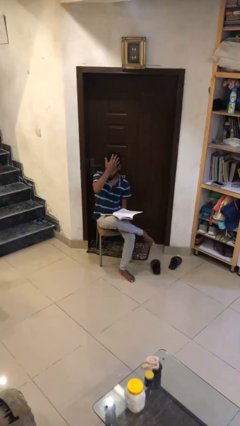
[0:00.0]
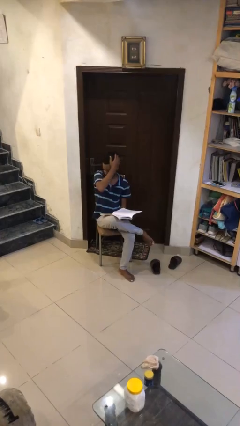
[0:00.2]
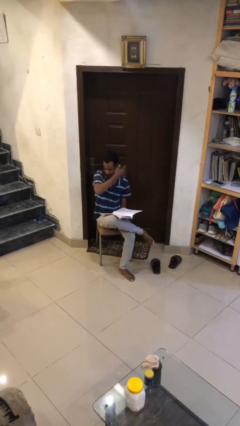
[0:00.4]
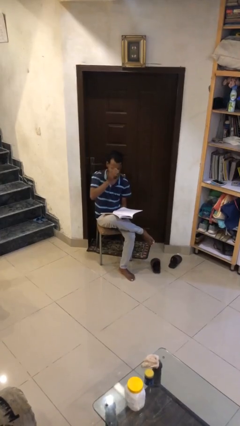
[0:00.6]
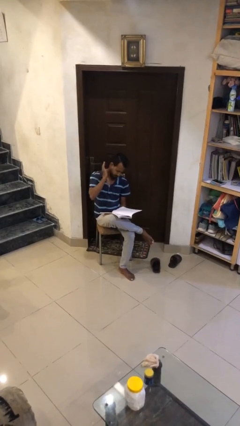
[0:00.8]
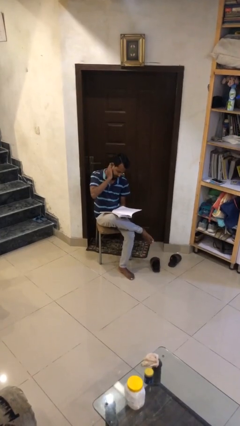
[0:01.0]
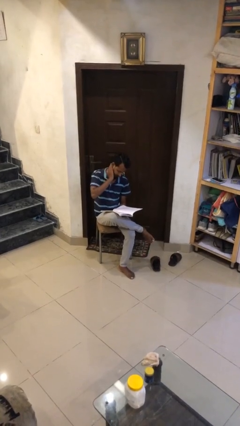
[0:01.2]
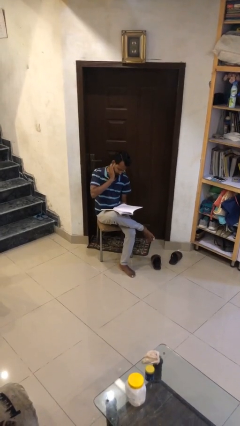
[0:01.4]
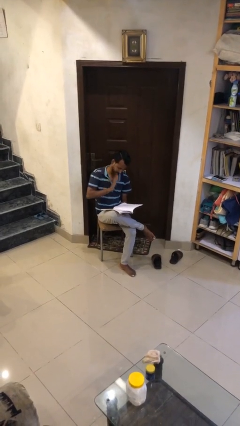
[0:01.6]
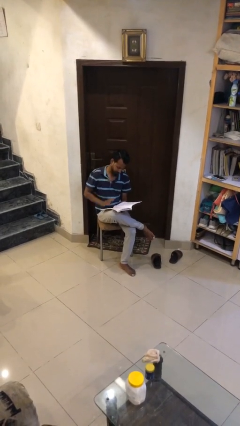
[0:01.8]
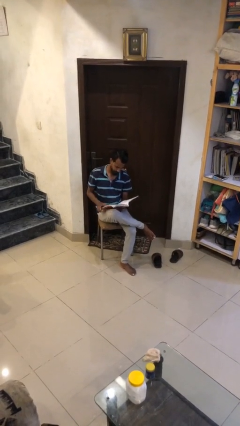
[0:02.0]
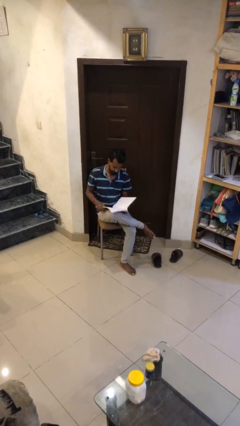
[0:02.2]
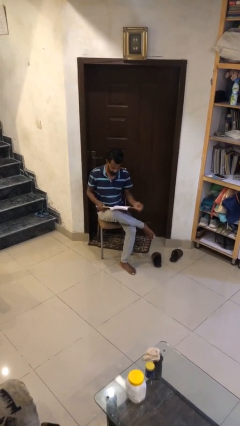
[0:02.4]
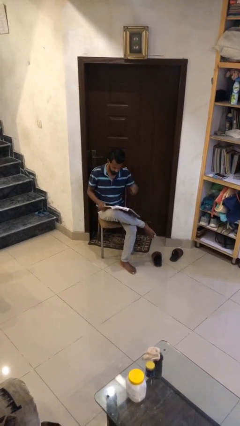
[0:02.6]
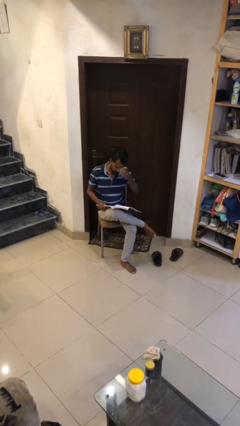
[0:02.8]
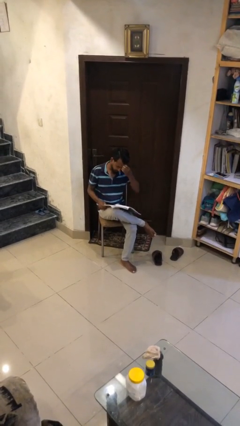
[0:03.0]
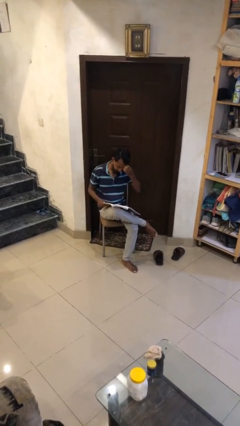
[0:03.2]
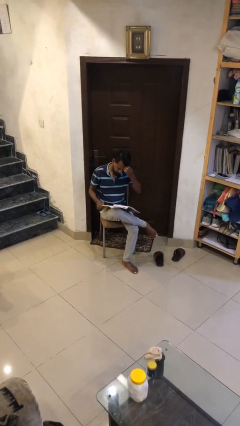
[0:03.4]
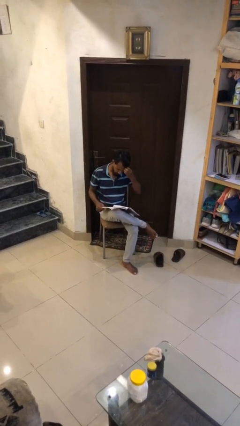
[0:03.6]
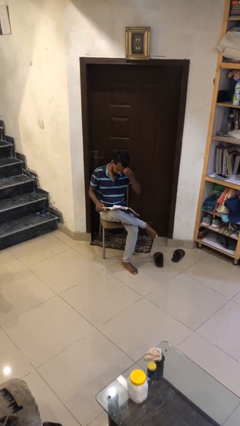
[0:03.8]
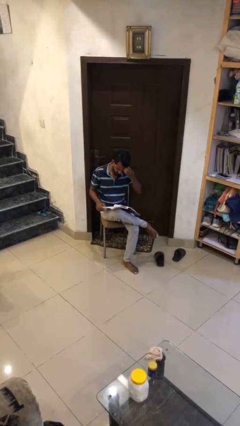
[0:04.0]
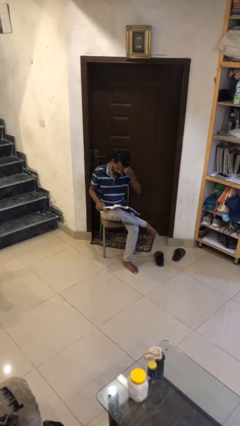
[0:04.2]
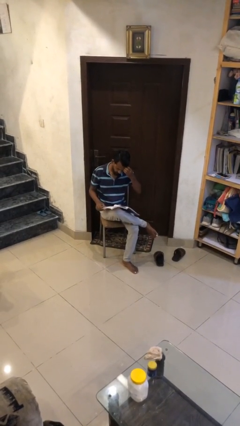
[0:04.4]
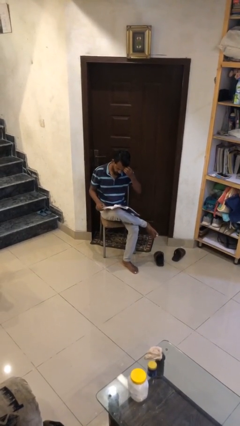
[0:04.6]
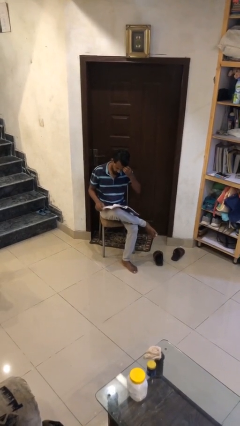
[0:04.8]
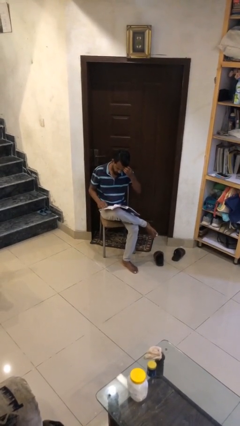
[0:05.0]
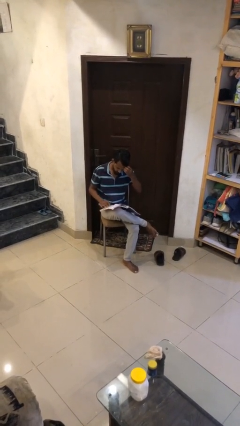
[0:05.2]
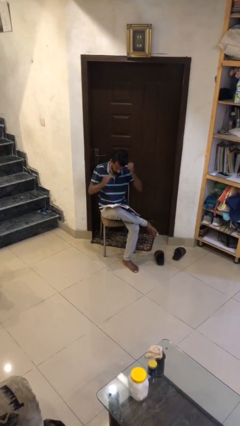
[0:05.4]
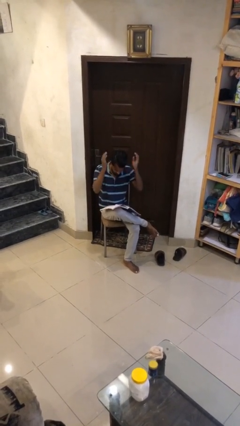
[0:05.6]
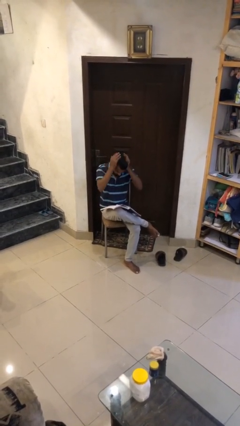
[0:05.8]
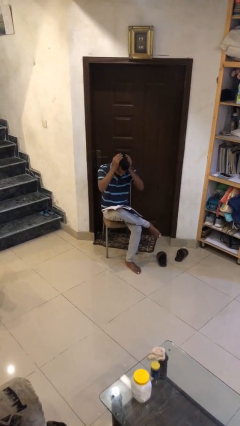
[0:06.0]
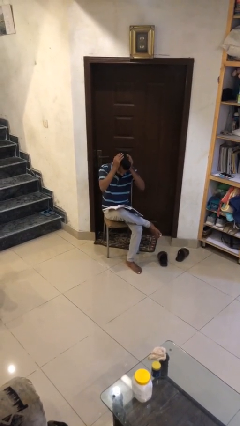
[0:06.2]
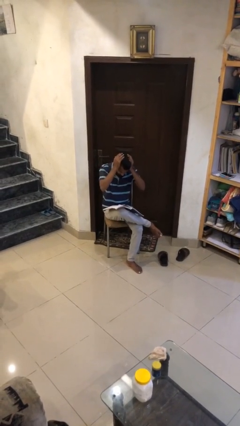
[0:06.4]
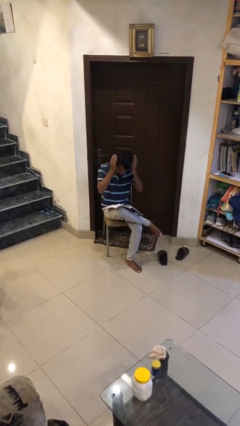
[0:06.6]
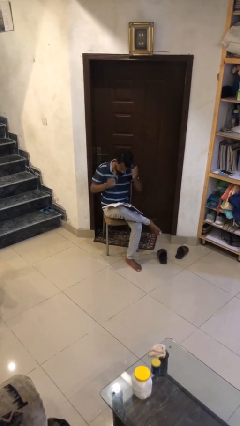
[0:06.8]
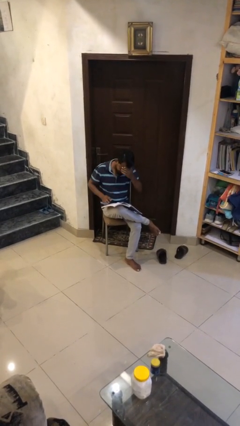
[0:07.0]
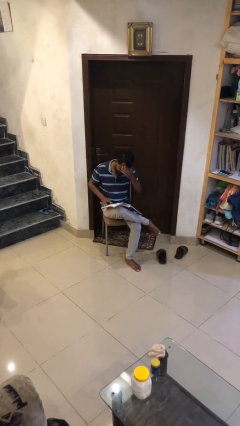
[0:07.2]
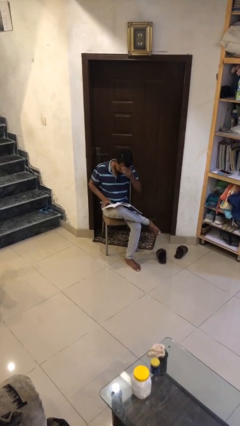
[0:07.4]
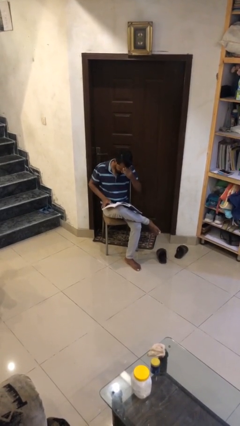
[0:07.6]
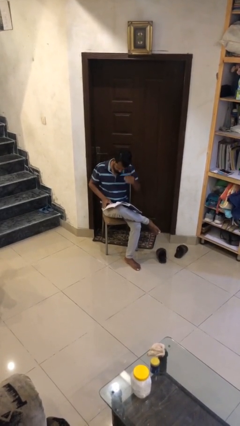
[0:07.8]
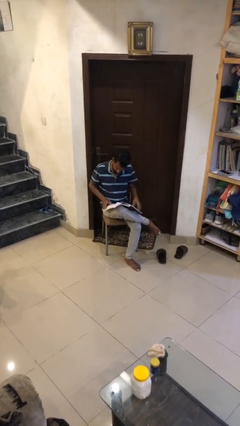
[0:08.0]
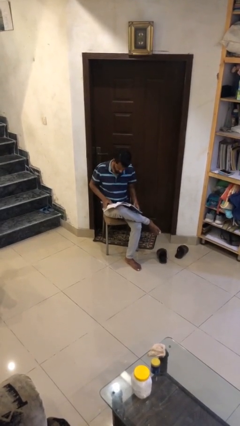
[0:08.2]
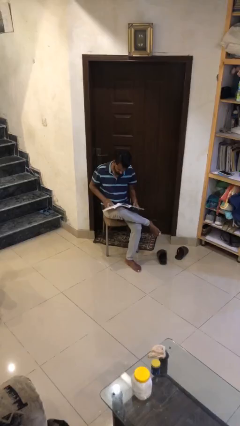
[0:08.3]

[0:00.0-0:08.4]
person reads document

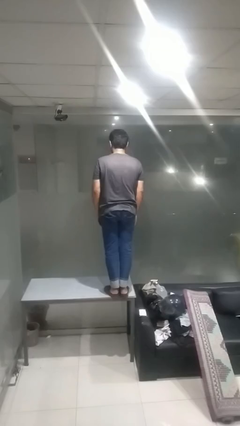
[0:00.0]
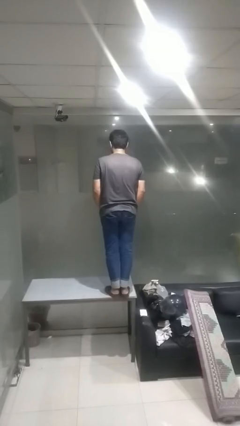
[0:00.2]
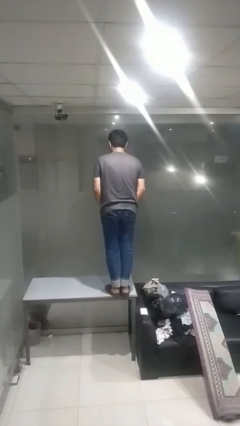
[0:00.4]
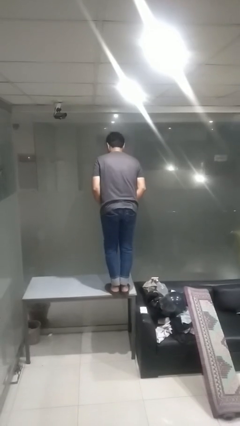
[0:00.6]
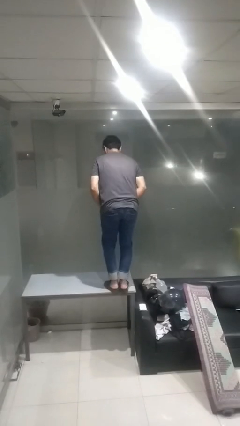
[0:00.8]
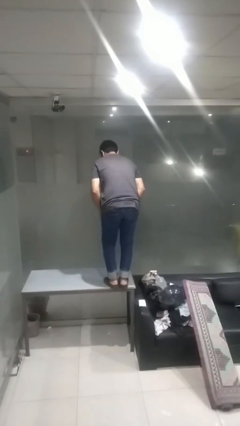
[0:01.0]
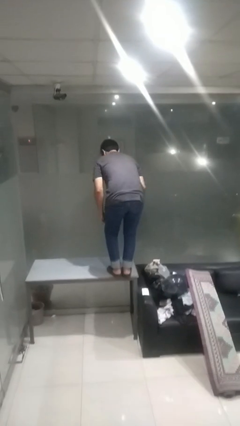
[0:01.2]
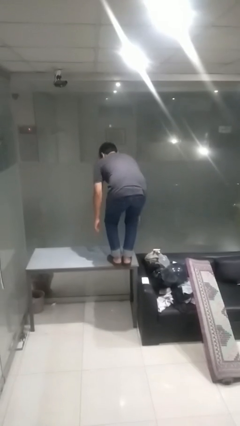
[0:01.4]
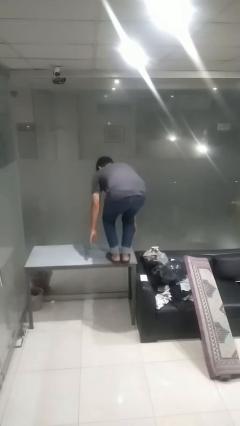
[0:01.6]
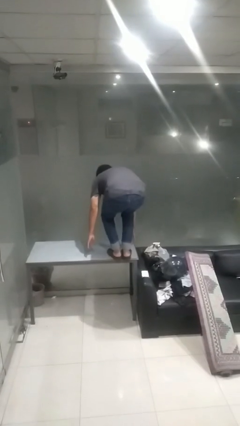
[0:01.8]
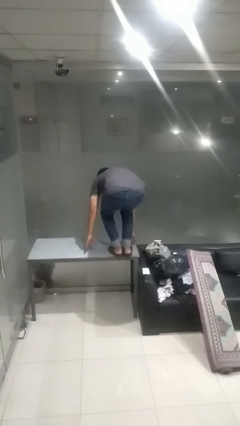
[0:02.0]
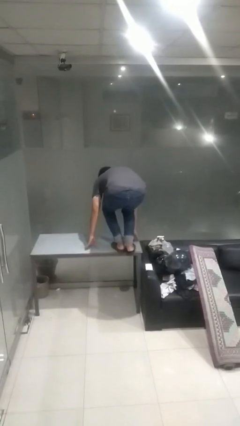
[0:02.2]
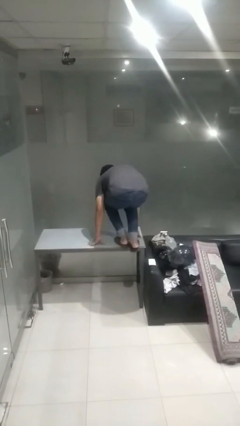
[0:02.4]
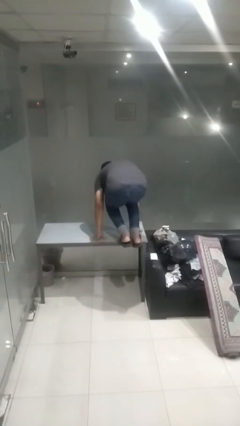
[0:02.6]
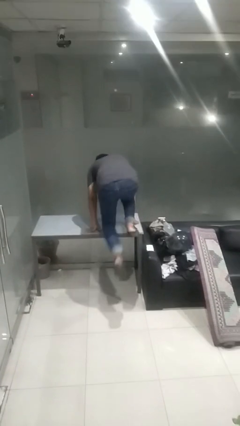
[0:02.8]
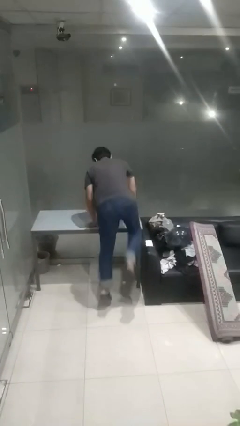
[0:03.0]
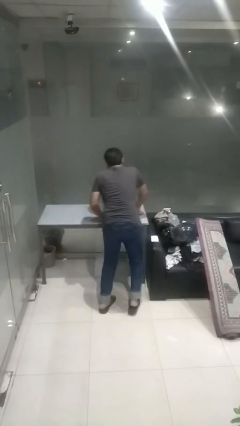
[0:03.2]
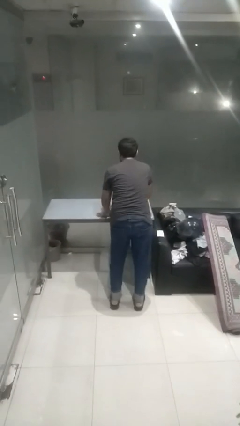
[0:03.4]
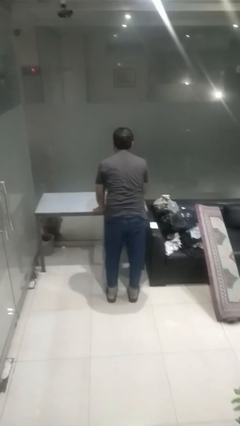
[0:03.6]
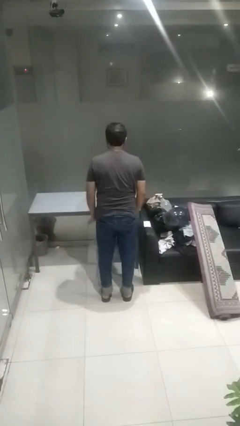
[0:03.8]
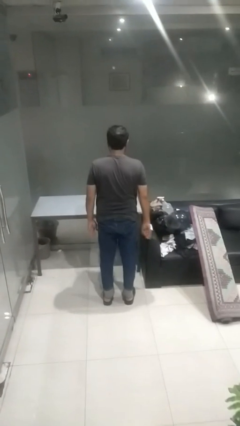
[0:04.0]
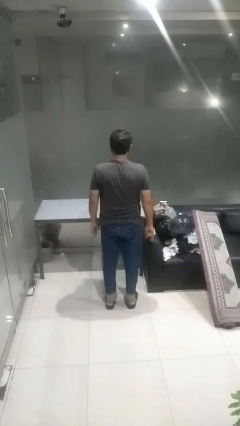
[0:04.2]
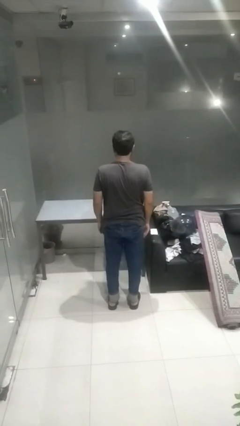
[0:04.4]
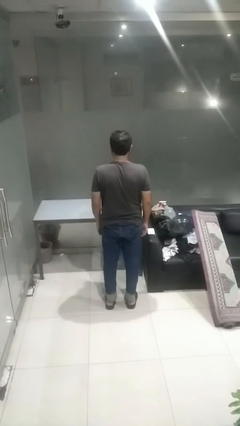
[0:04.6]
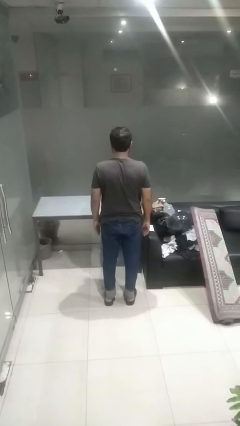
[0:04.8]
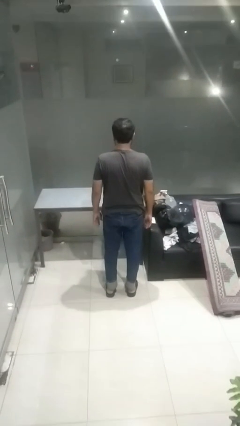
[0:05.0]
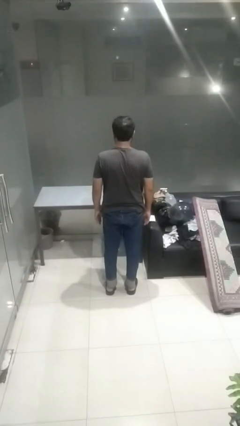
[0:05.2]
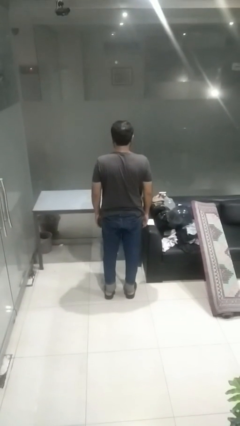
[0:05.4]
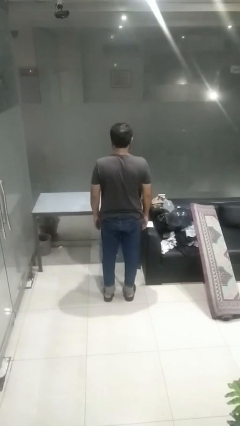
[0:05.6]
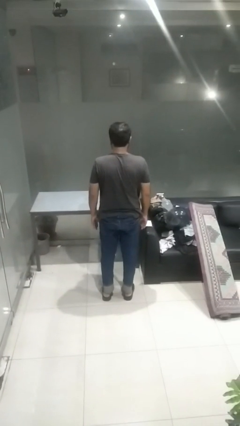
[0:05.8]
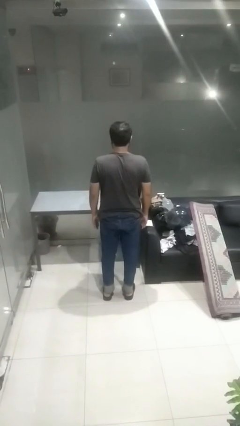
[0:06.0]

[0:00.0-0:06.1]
person climbs off table

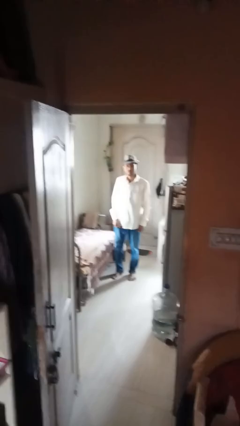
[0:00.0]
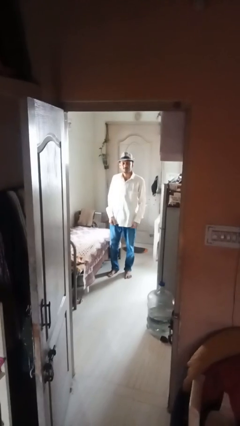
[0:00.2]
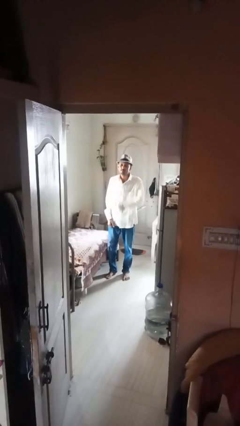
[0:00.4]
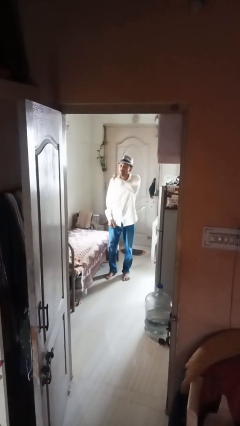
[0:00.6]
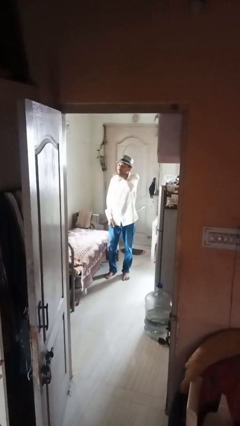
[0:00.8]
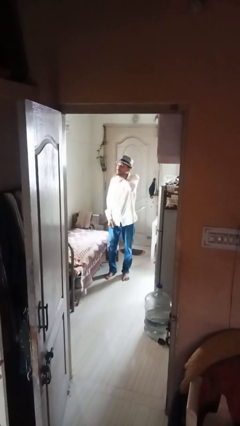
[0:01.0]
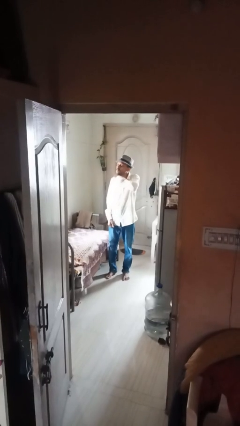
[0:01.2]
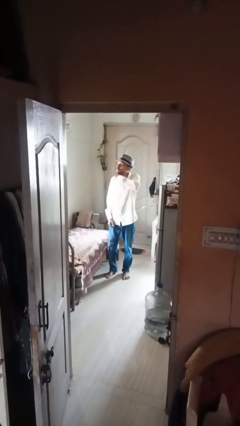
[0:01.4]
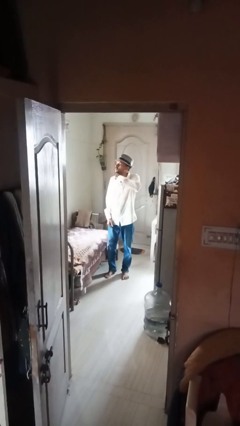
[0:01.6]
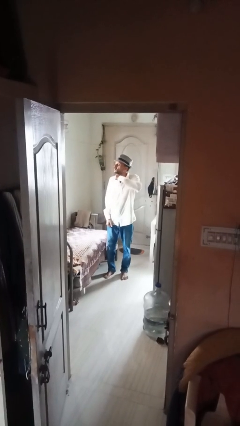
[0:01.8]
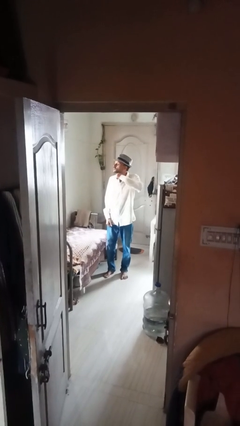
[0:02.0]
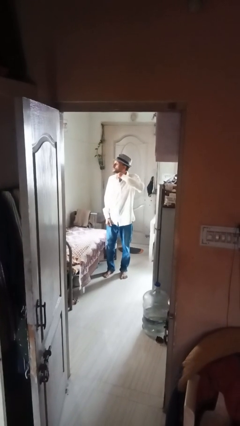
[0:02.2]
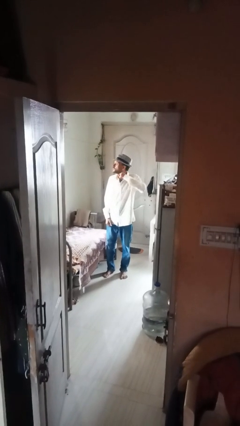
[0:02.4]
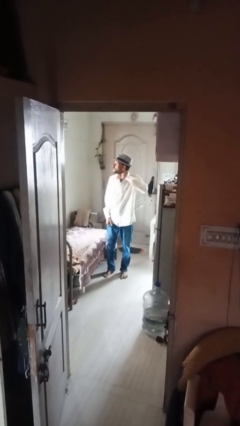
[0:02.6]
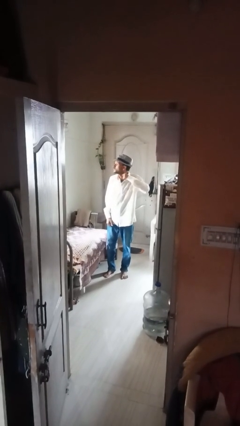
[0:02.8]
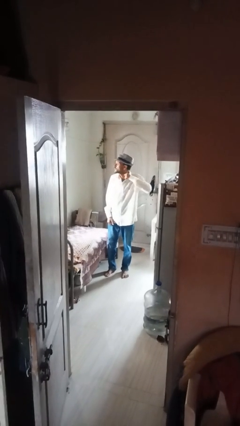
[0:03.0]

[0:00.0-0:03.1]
person gestures cut

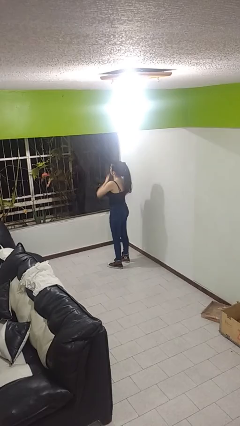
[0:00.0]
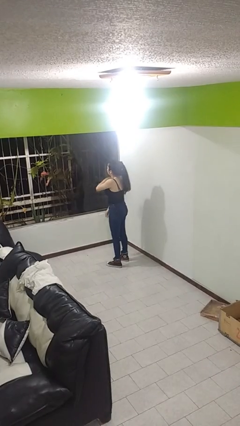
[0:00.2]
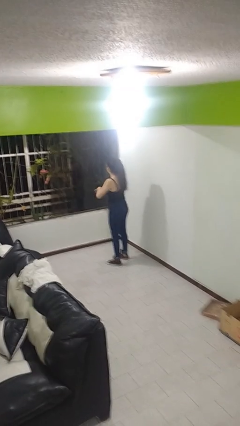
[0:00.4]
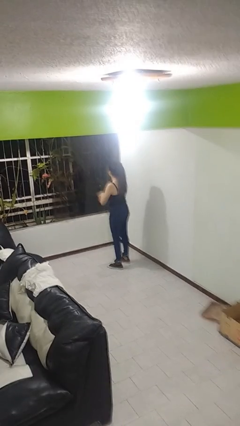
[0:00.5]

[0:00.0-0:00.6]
person swats bug
